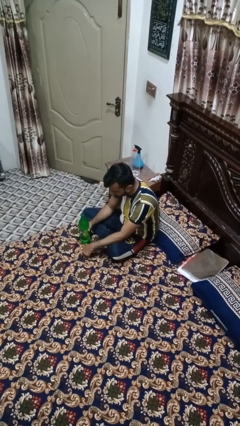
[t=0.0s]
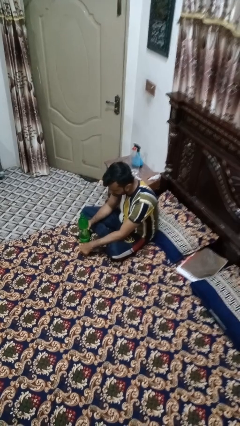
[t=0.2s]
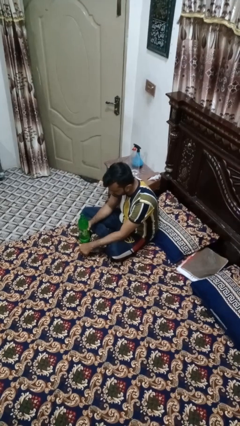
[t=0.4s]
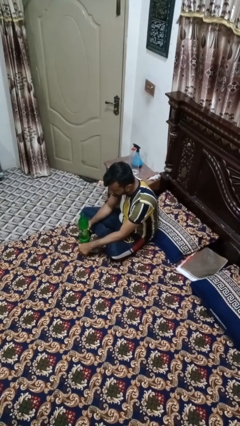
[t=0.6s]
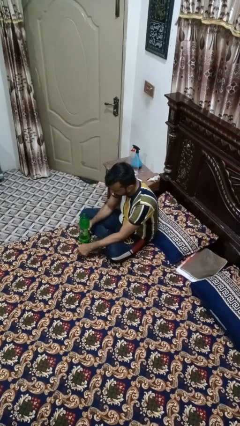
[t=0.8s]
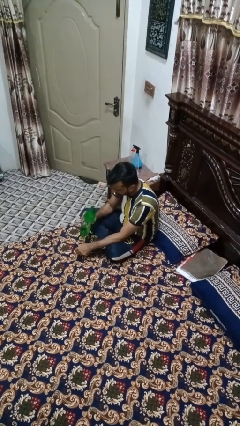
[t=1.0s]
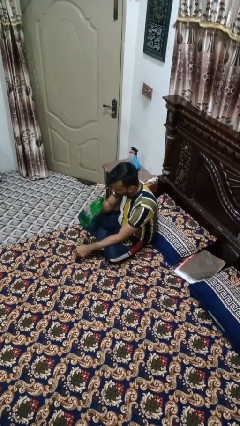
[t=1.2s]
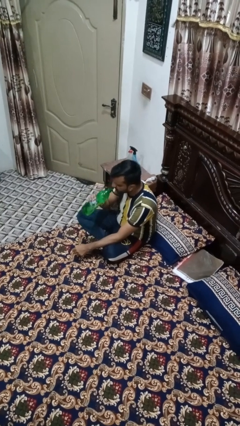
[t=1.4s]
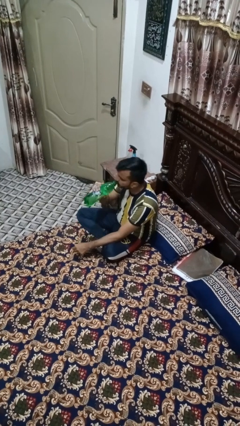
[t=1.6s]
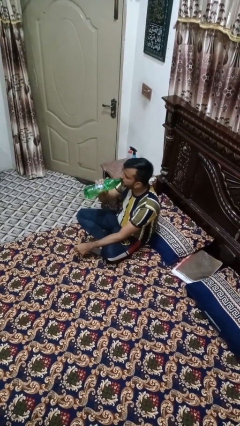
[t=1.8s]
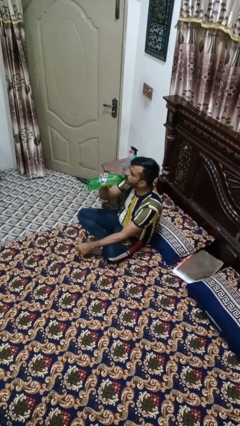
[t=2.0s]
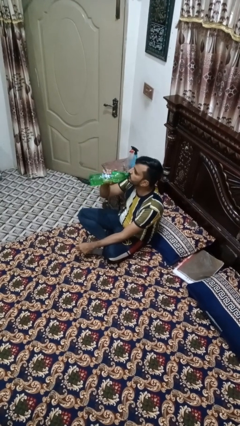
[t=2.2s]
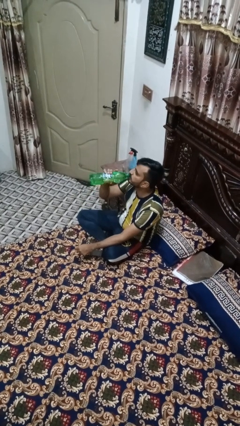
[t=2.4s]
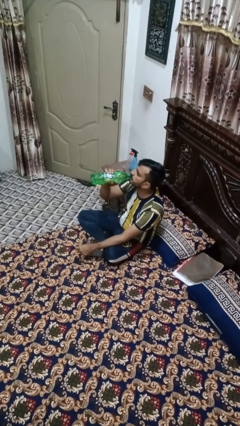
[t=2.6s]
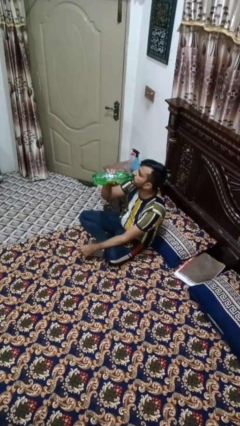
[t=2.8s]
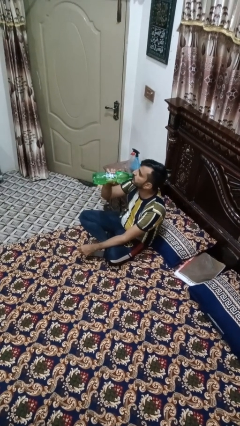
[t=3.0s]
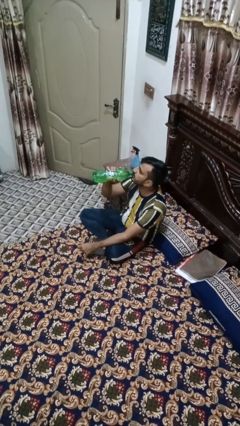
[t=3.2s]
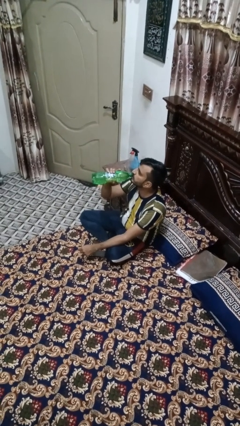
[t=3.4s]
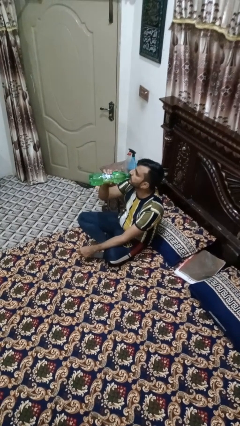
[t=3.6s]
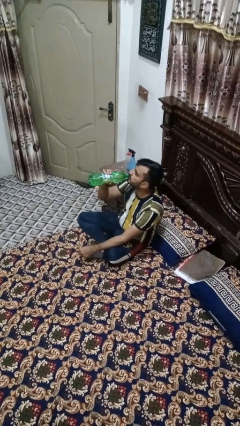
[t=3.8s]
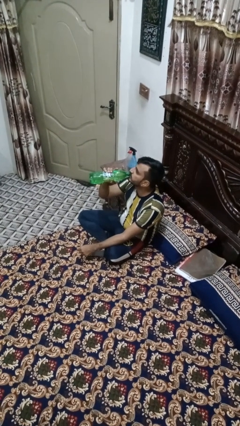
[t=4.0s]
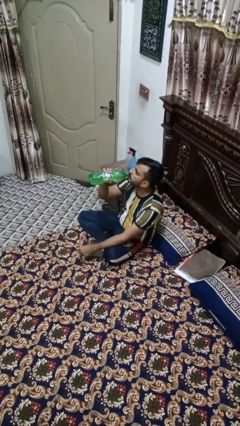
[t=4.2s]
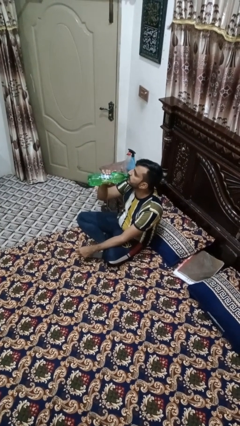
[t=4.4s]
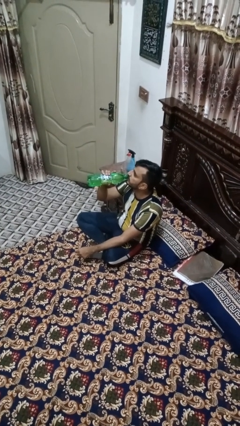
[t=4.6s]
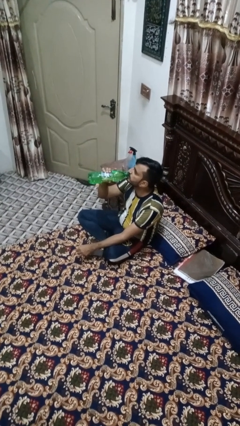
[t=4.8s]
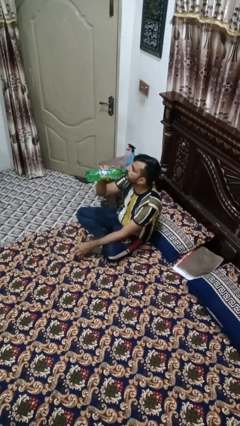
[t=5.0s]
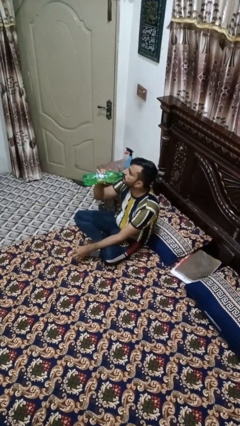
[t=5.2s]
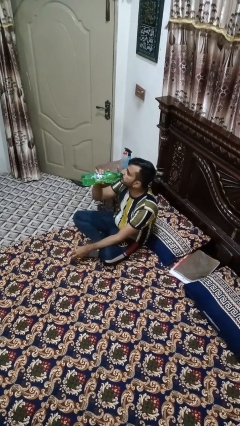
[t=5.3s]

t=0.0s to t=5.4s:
person drinks from bottle

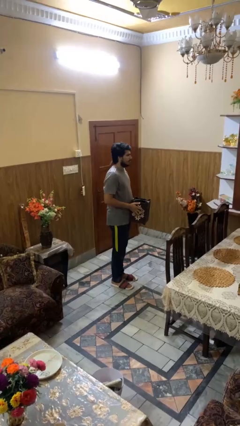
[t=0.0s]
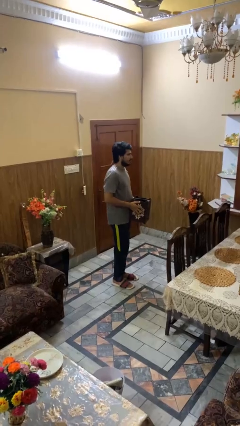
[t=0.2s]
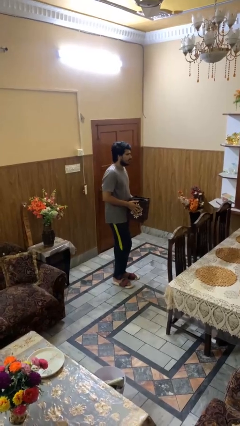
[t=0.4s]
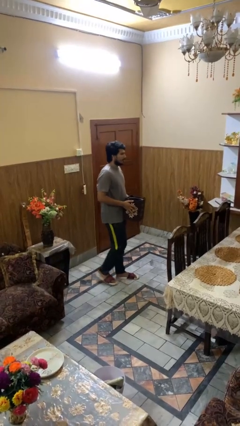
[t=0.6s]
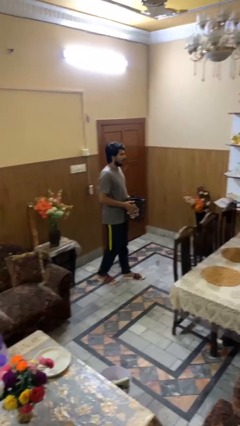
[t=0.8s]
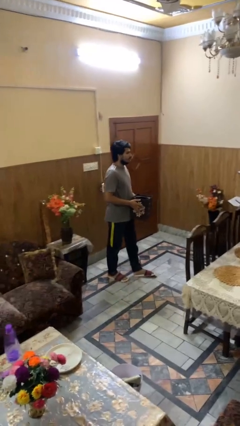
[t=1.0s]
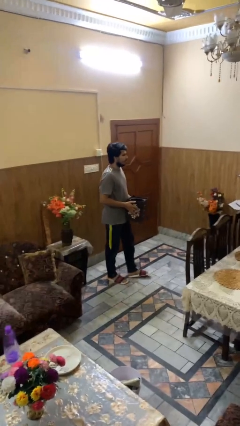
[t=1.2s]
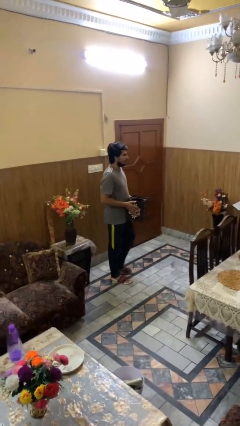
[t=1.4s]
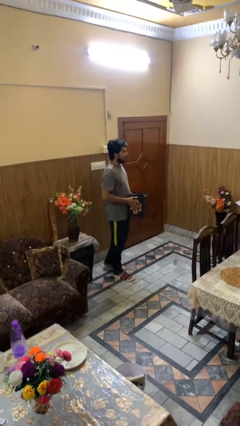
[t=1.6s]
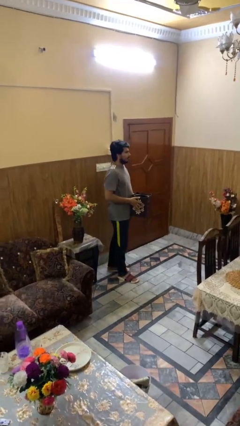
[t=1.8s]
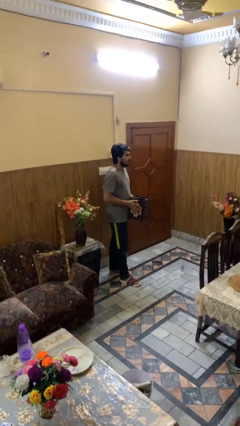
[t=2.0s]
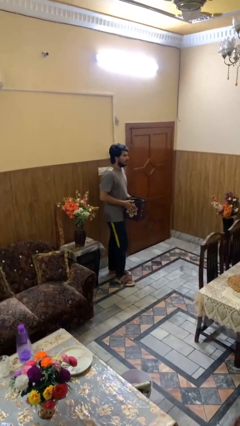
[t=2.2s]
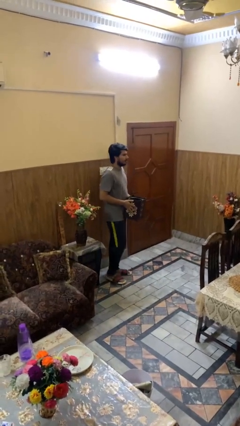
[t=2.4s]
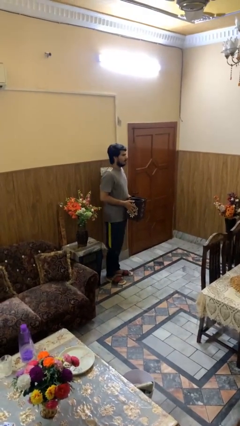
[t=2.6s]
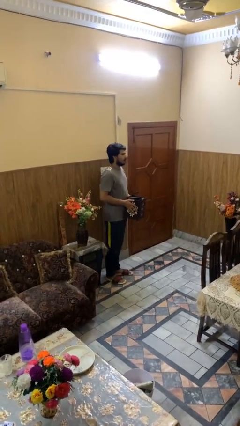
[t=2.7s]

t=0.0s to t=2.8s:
person carries groceries

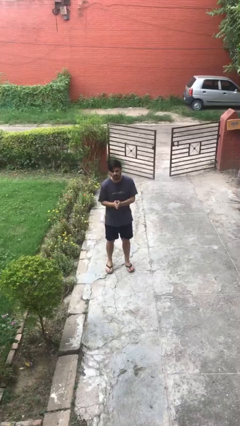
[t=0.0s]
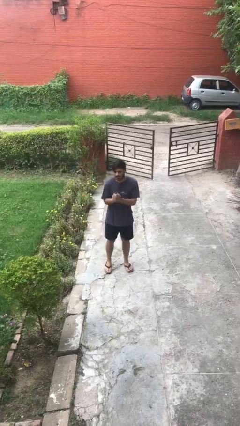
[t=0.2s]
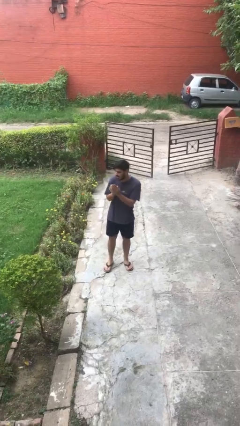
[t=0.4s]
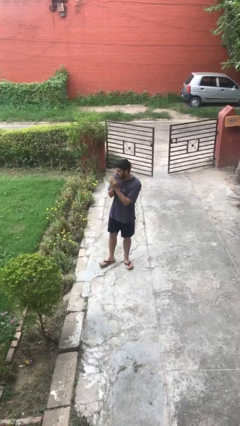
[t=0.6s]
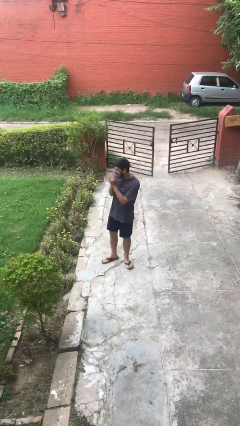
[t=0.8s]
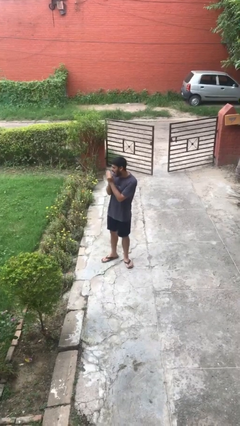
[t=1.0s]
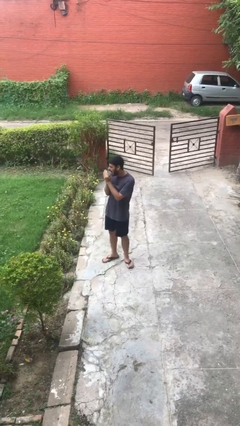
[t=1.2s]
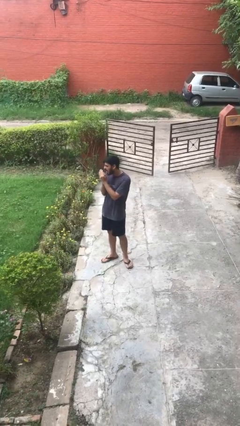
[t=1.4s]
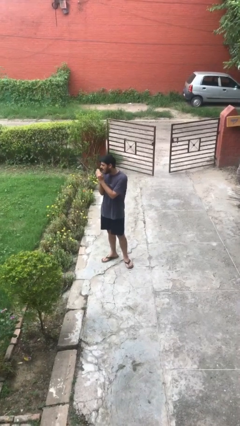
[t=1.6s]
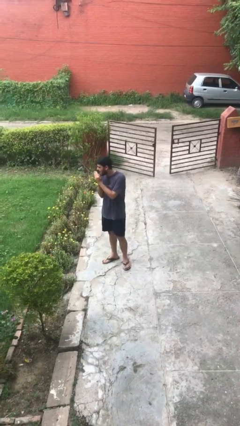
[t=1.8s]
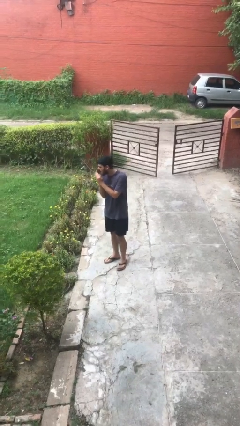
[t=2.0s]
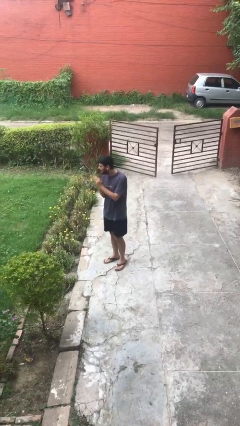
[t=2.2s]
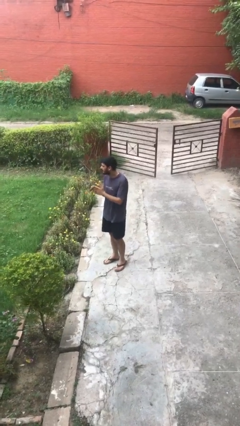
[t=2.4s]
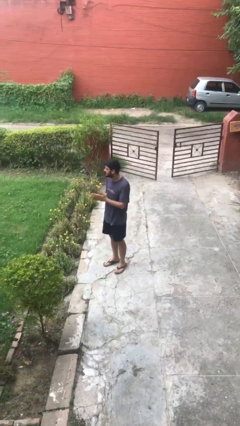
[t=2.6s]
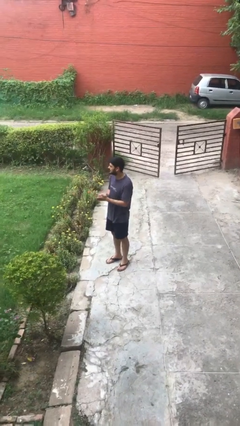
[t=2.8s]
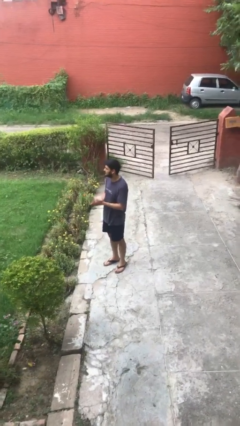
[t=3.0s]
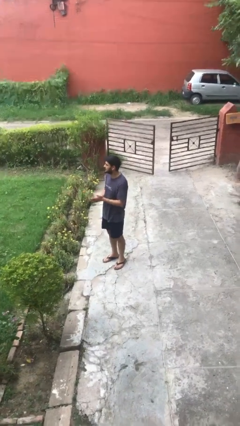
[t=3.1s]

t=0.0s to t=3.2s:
person blows into hands

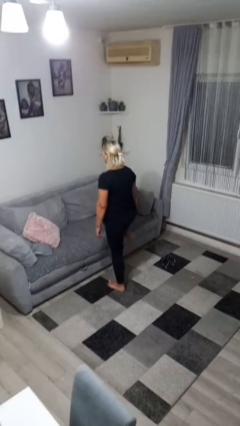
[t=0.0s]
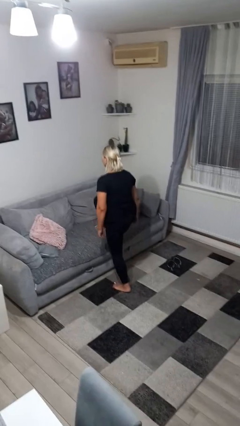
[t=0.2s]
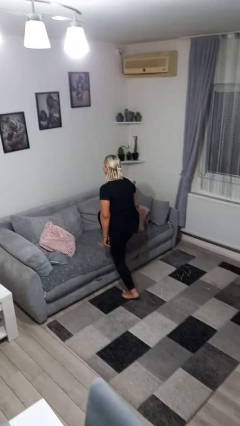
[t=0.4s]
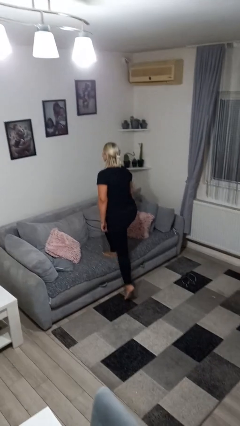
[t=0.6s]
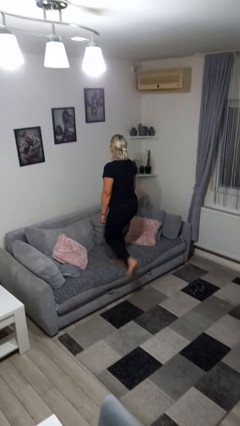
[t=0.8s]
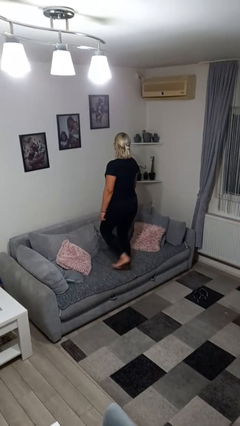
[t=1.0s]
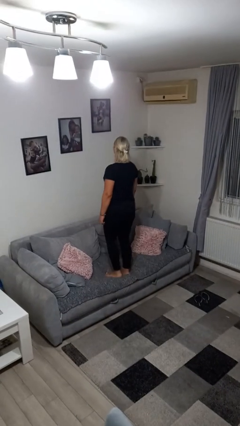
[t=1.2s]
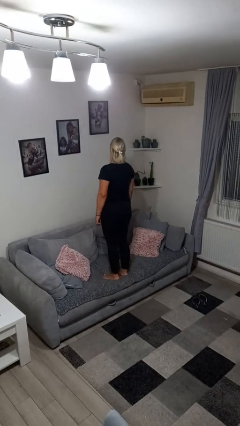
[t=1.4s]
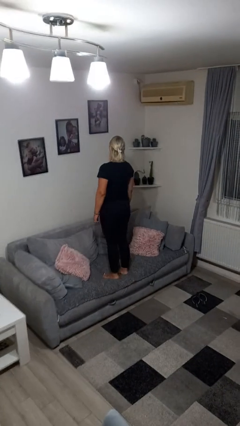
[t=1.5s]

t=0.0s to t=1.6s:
person climbs on couch

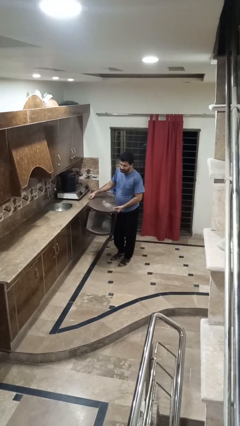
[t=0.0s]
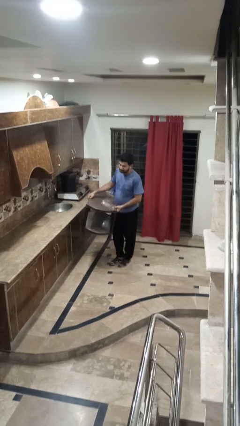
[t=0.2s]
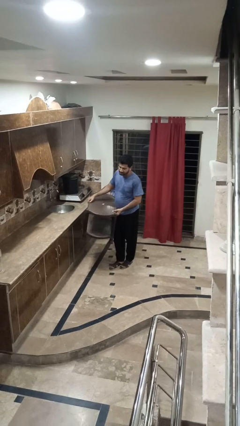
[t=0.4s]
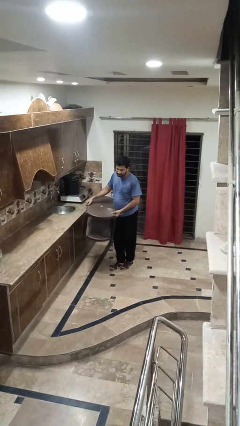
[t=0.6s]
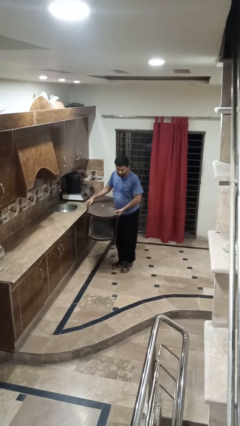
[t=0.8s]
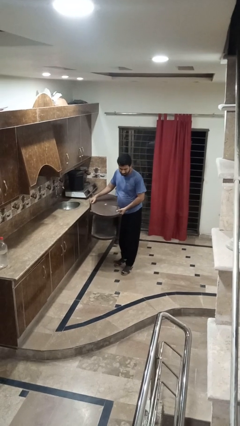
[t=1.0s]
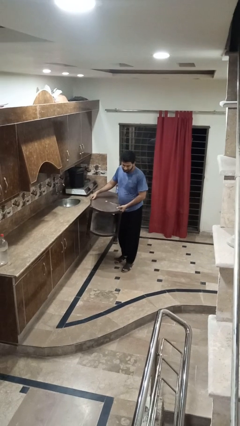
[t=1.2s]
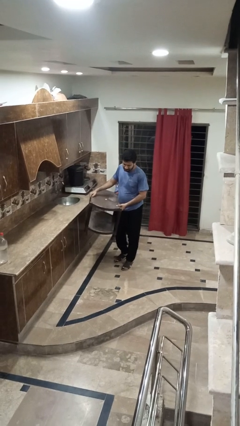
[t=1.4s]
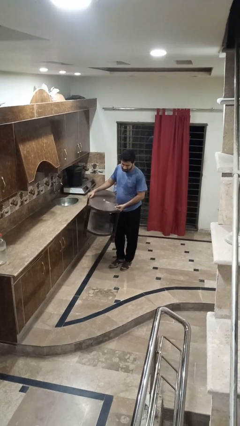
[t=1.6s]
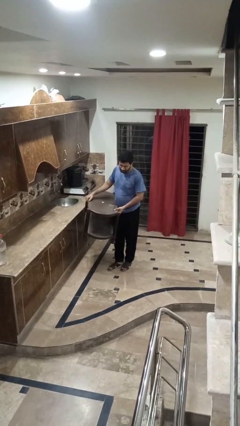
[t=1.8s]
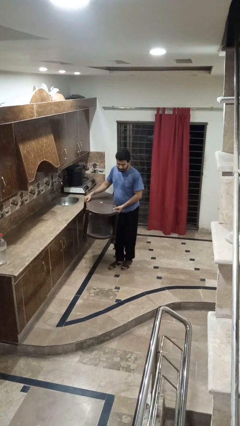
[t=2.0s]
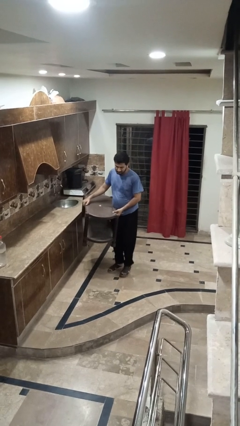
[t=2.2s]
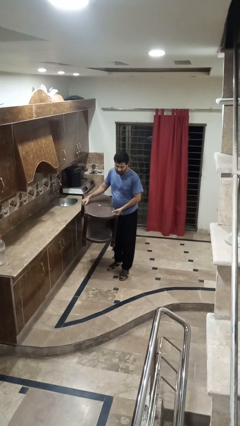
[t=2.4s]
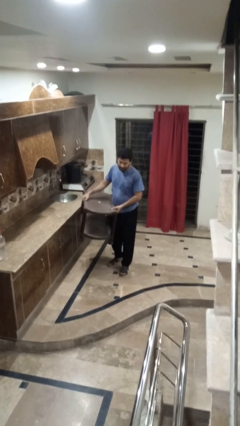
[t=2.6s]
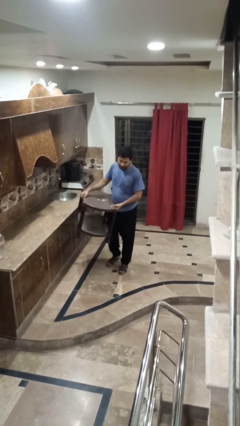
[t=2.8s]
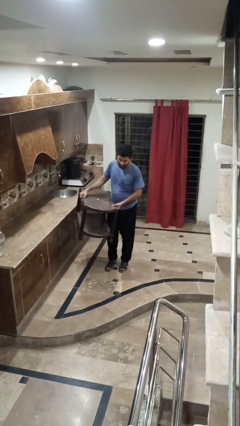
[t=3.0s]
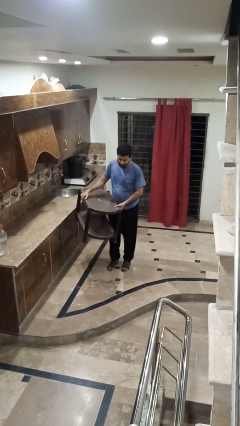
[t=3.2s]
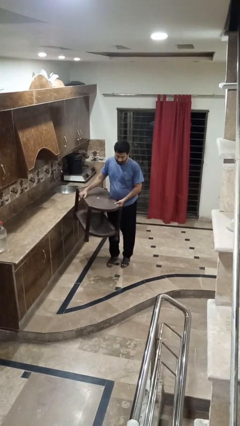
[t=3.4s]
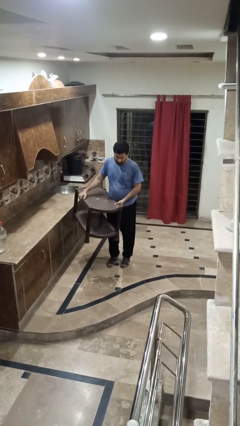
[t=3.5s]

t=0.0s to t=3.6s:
person carries furniture

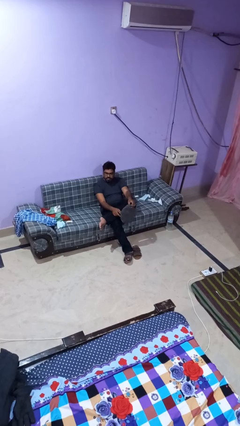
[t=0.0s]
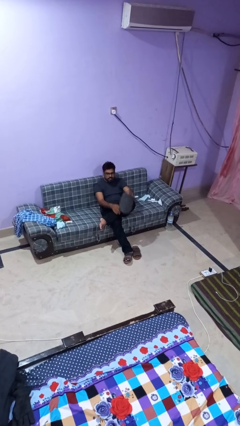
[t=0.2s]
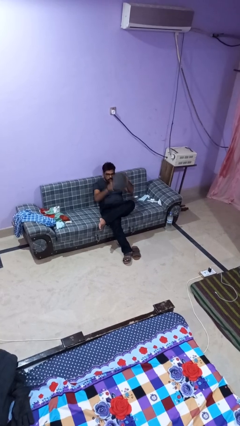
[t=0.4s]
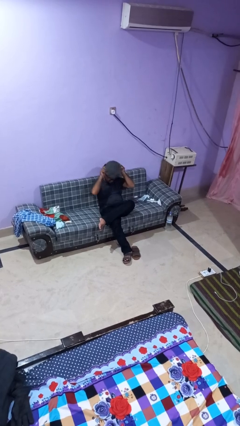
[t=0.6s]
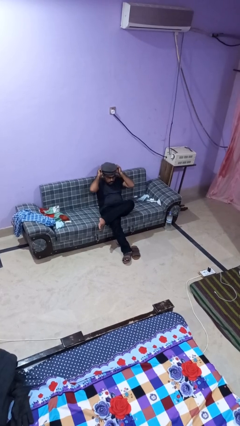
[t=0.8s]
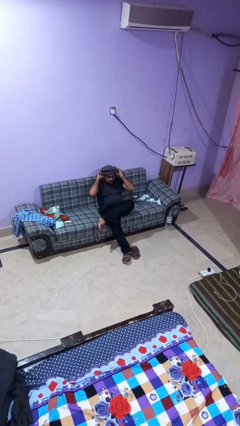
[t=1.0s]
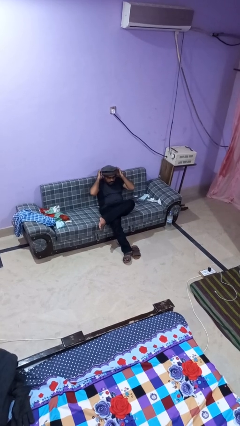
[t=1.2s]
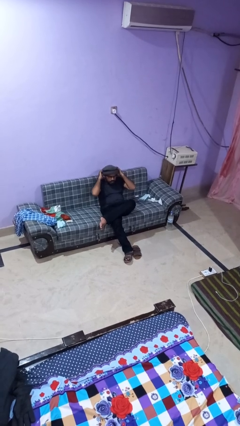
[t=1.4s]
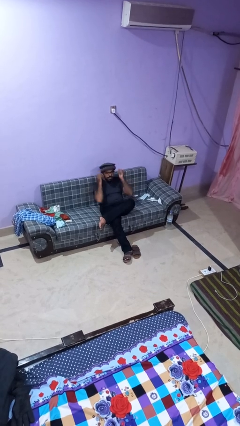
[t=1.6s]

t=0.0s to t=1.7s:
person puts on hat
